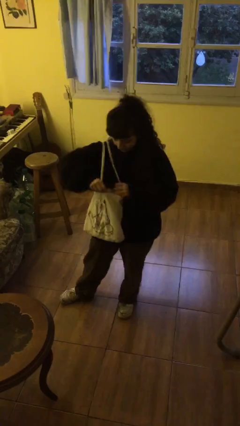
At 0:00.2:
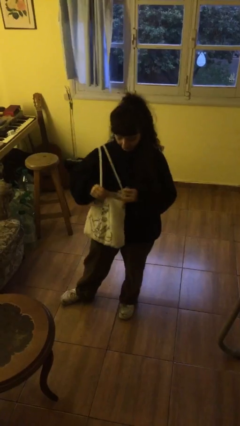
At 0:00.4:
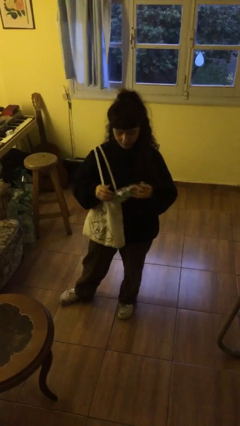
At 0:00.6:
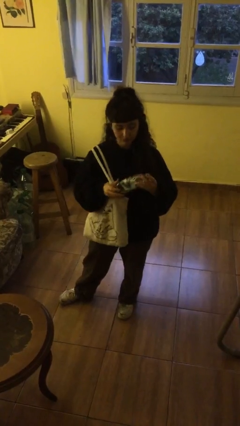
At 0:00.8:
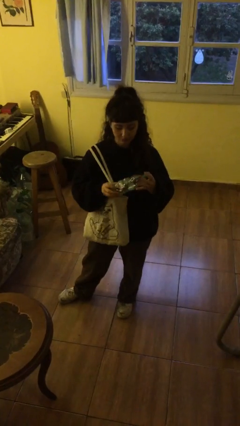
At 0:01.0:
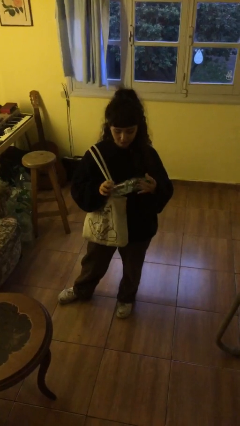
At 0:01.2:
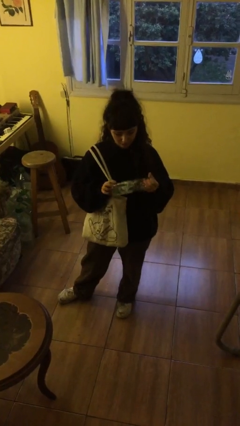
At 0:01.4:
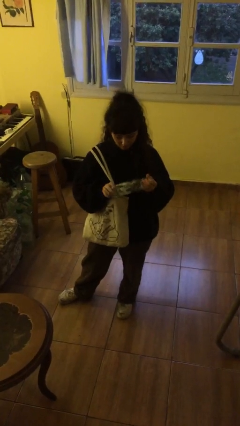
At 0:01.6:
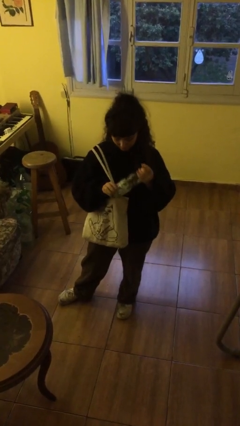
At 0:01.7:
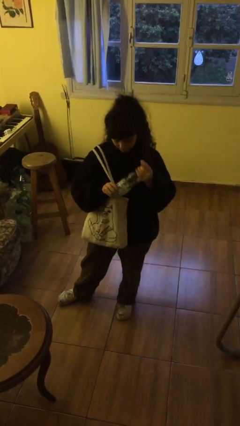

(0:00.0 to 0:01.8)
person takes object from purse

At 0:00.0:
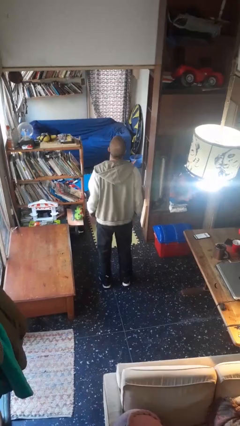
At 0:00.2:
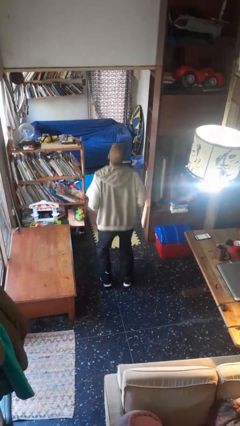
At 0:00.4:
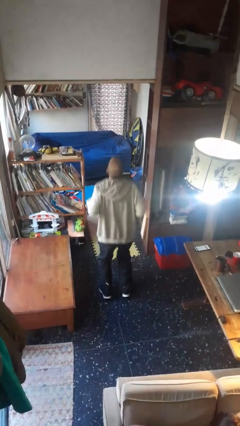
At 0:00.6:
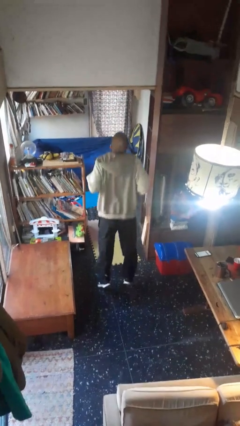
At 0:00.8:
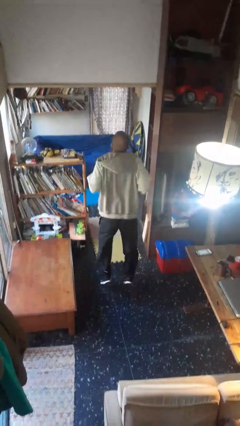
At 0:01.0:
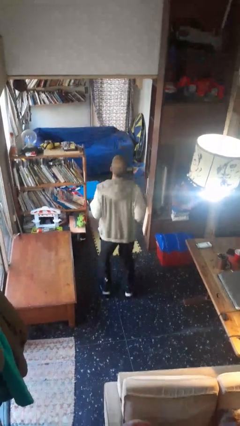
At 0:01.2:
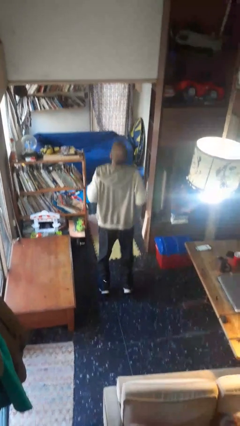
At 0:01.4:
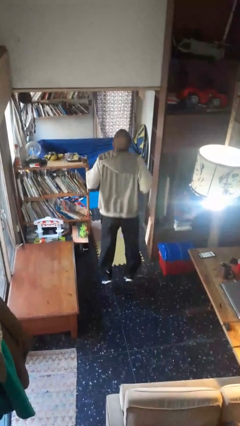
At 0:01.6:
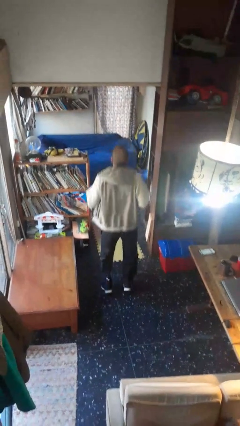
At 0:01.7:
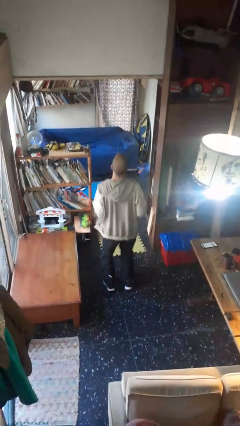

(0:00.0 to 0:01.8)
person jumps

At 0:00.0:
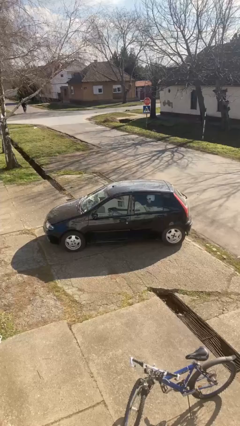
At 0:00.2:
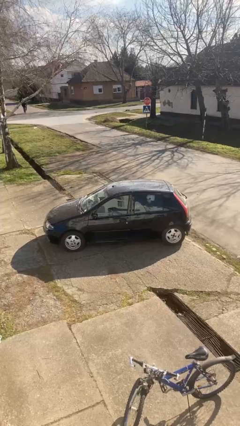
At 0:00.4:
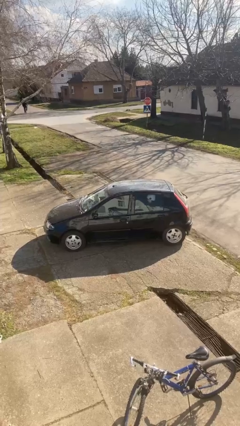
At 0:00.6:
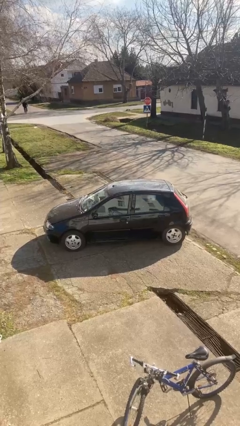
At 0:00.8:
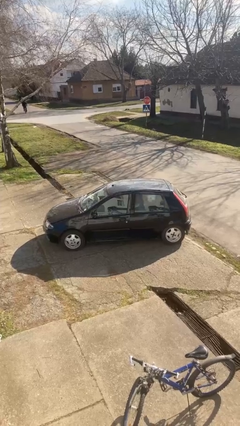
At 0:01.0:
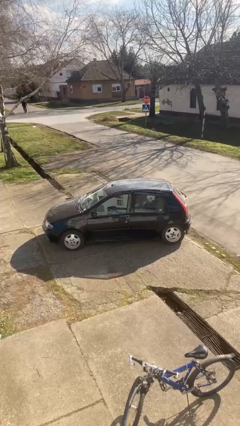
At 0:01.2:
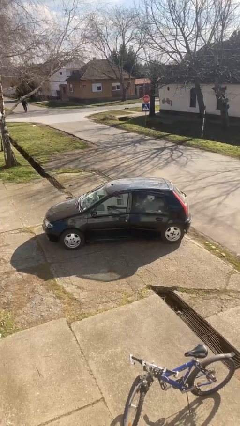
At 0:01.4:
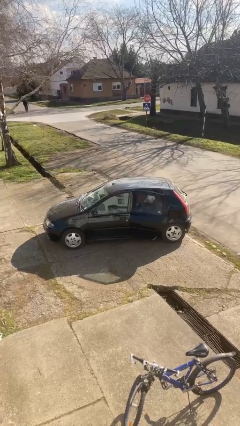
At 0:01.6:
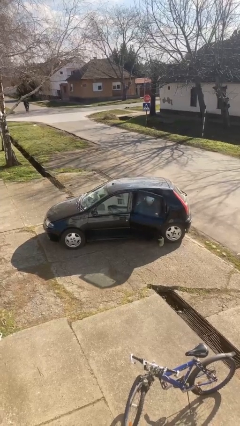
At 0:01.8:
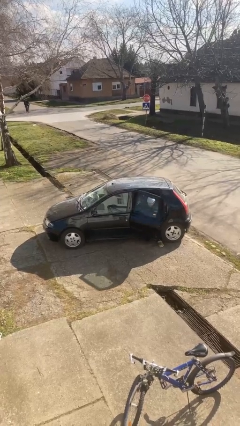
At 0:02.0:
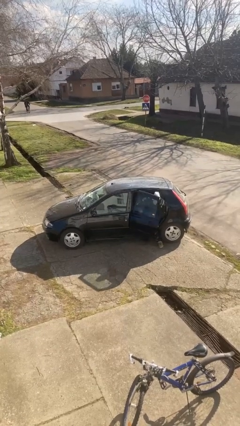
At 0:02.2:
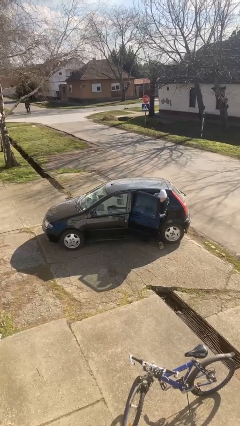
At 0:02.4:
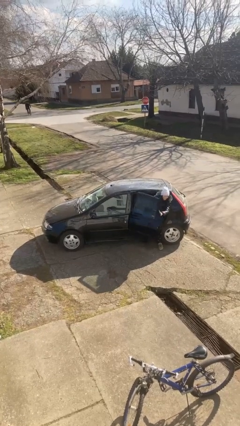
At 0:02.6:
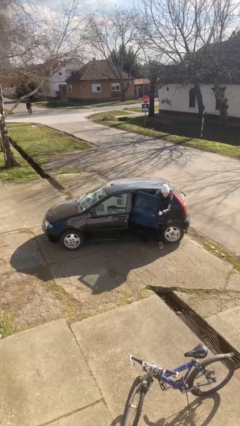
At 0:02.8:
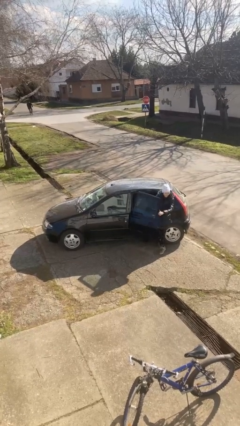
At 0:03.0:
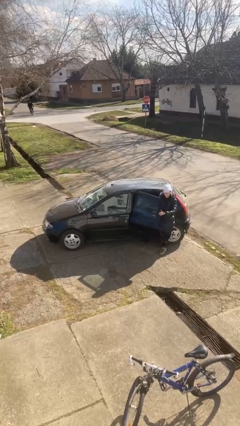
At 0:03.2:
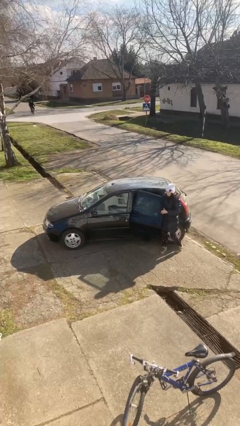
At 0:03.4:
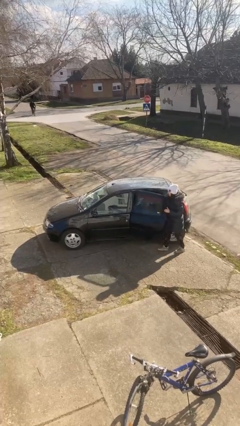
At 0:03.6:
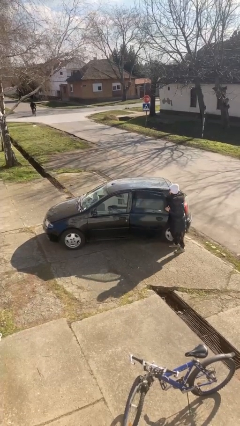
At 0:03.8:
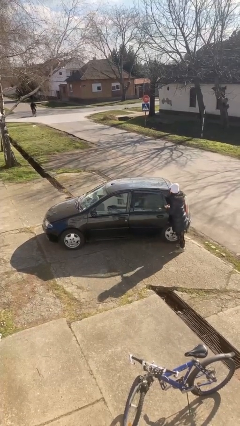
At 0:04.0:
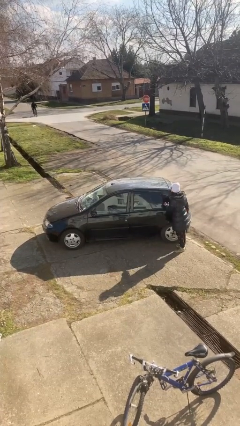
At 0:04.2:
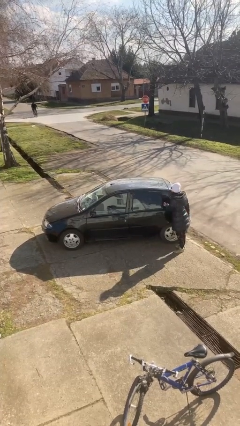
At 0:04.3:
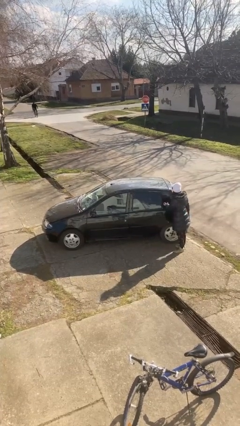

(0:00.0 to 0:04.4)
car drops off person

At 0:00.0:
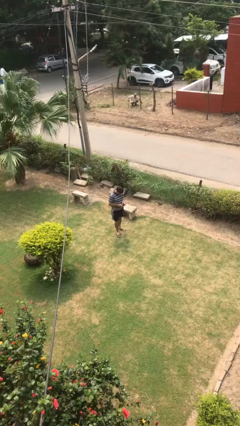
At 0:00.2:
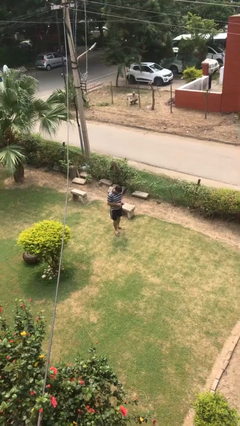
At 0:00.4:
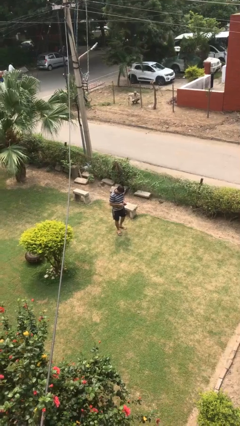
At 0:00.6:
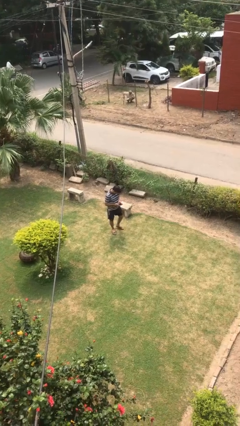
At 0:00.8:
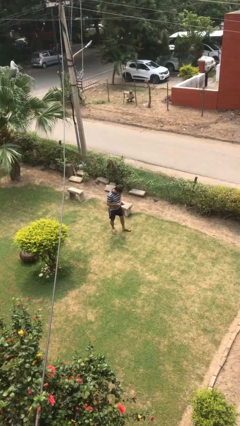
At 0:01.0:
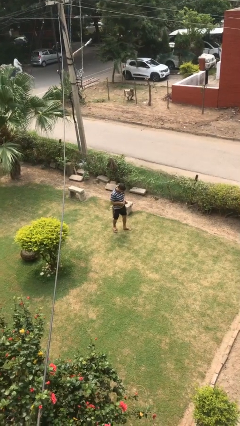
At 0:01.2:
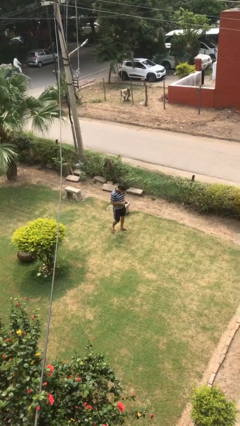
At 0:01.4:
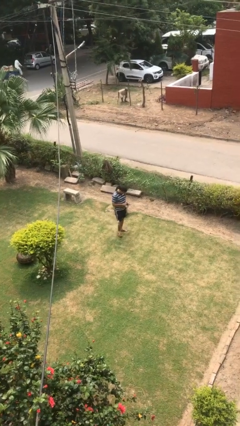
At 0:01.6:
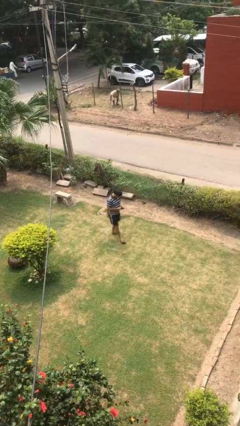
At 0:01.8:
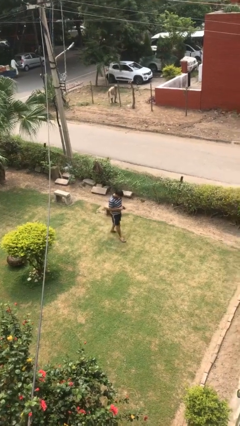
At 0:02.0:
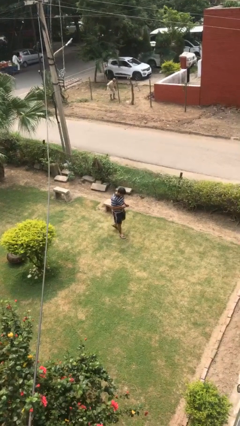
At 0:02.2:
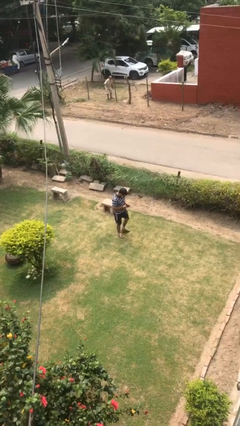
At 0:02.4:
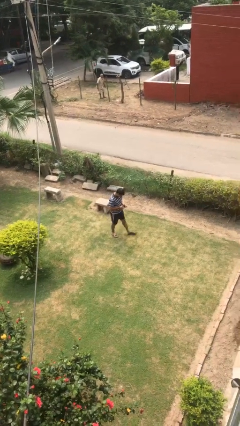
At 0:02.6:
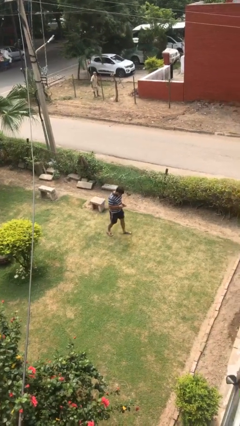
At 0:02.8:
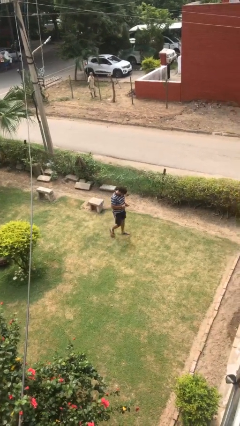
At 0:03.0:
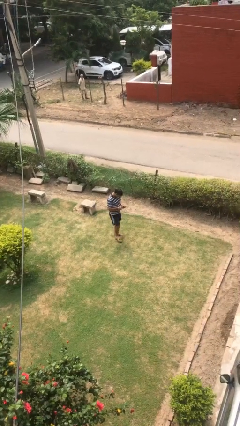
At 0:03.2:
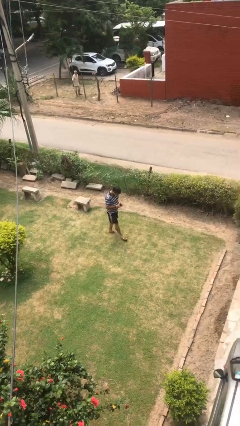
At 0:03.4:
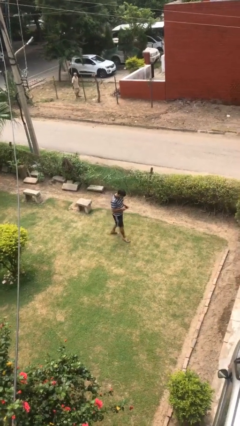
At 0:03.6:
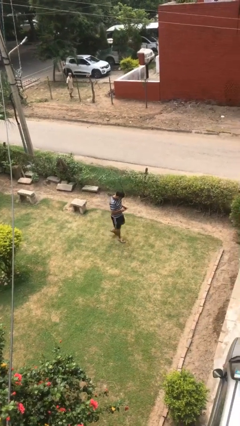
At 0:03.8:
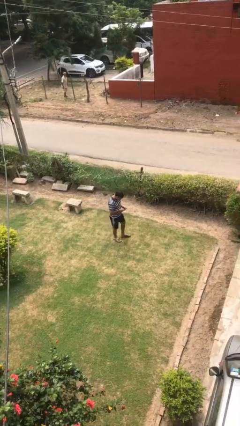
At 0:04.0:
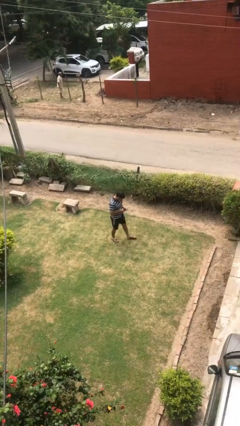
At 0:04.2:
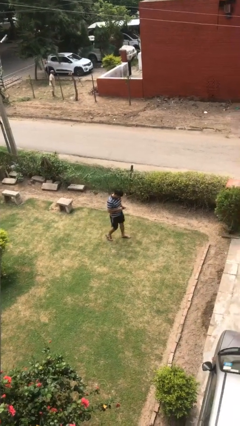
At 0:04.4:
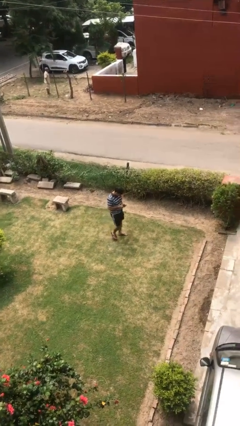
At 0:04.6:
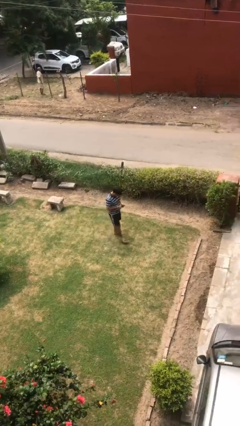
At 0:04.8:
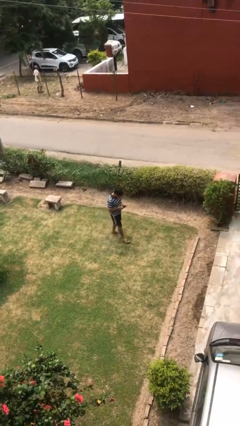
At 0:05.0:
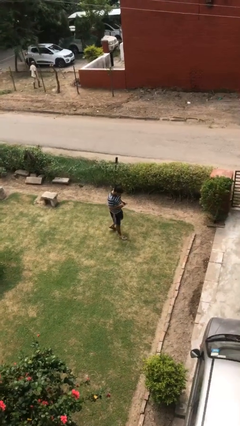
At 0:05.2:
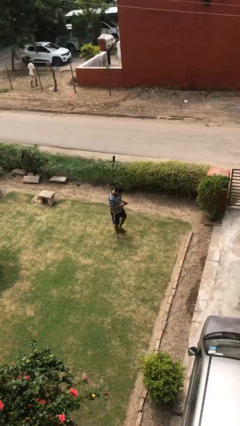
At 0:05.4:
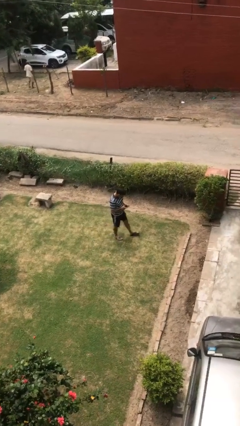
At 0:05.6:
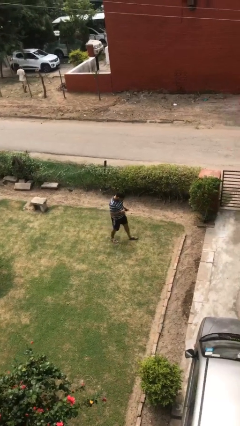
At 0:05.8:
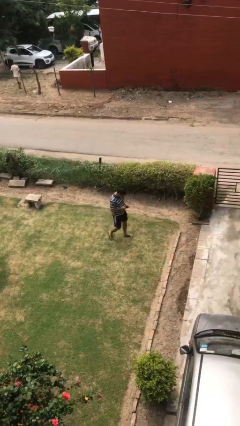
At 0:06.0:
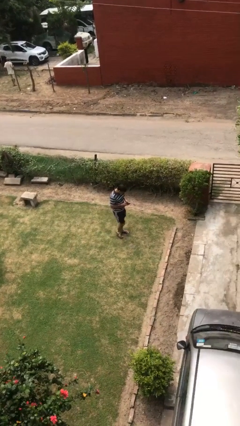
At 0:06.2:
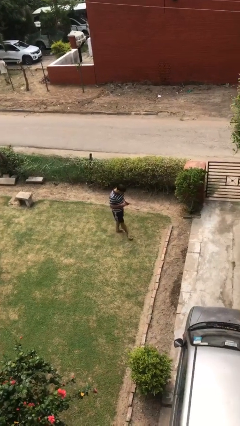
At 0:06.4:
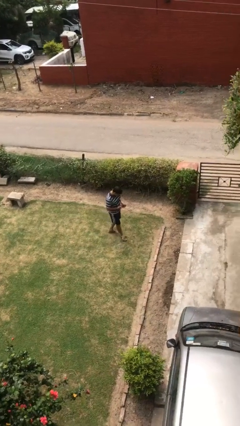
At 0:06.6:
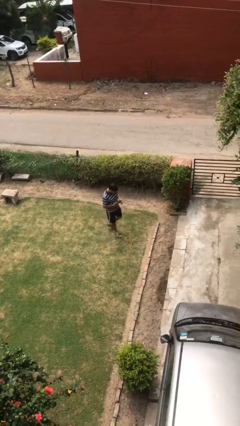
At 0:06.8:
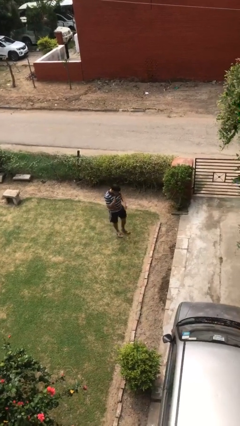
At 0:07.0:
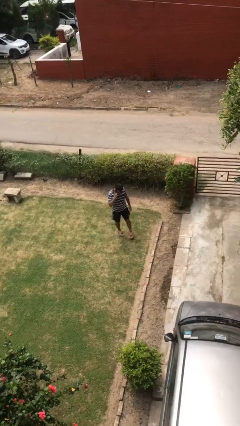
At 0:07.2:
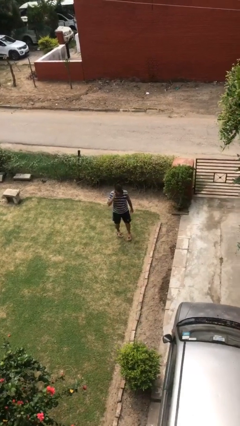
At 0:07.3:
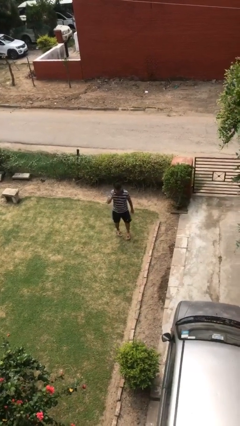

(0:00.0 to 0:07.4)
person texts on phone

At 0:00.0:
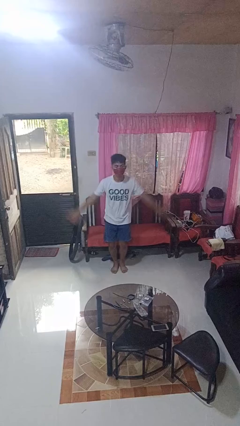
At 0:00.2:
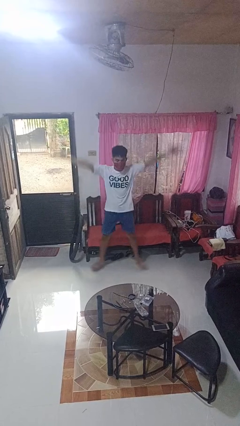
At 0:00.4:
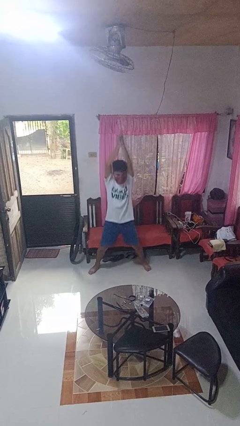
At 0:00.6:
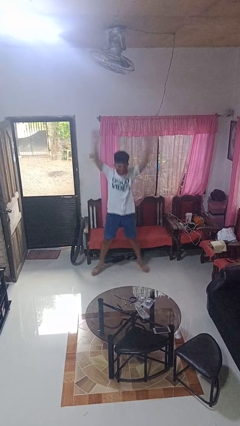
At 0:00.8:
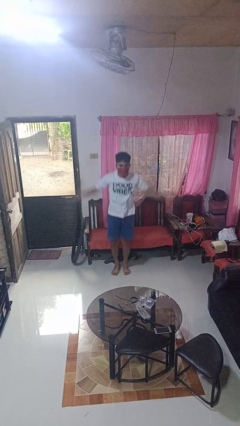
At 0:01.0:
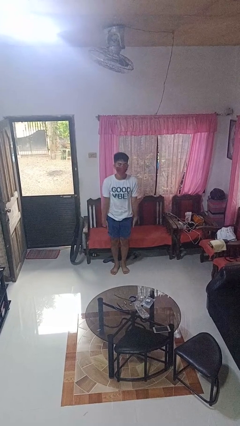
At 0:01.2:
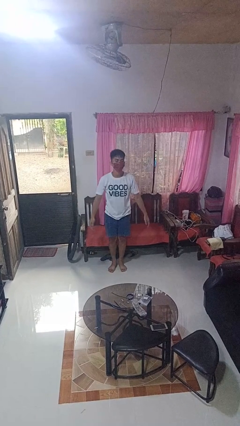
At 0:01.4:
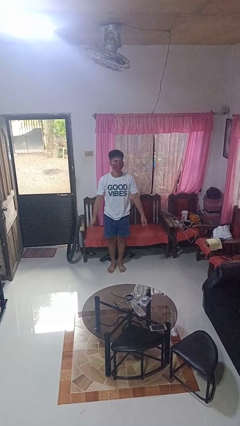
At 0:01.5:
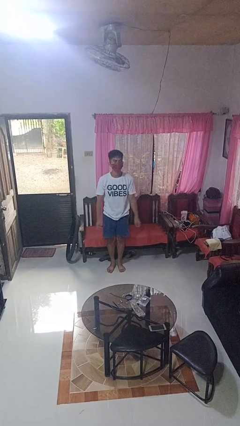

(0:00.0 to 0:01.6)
person exercises with jumping jacks

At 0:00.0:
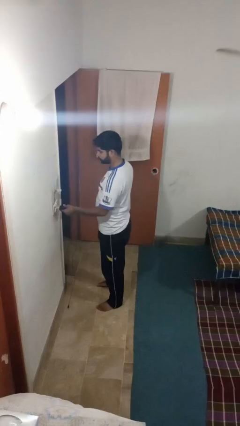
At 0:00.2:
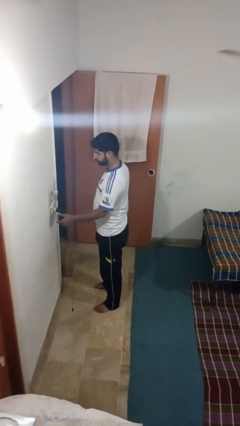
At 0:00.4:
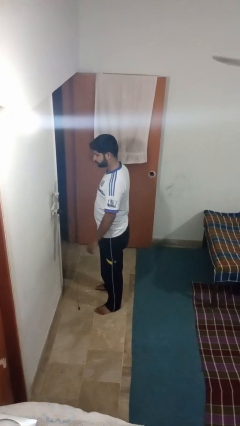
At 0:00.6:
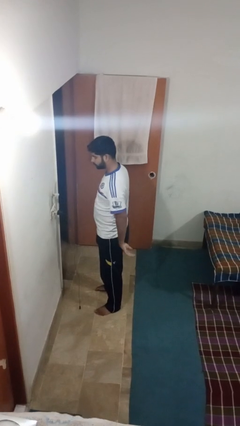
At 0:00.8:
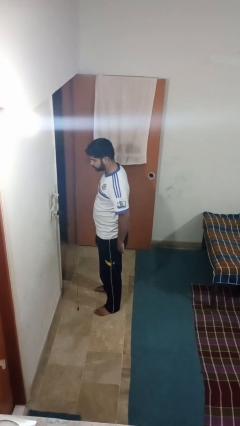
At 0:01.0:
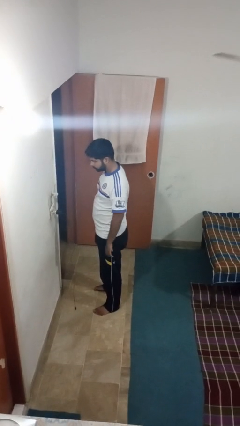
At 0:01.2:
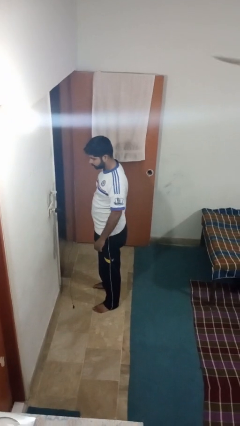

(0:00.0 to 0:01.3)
person plugs into electrical socket
